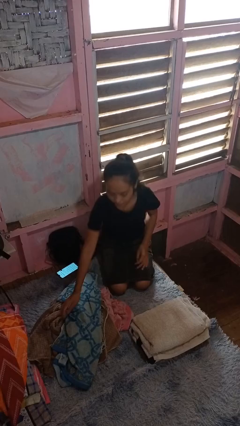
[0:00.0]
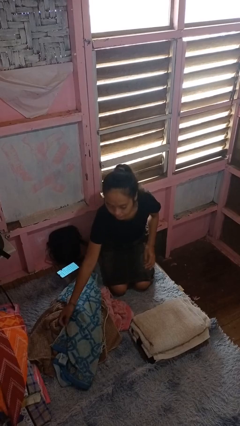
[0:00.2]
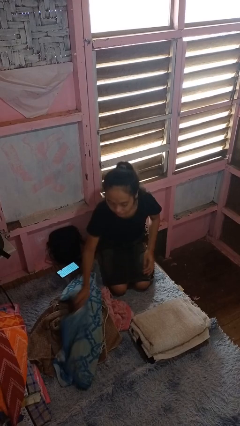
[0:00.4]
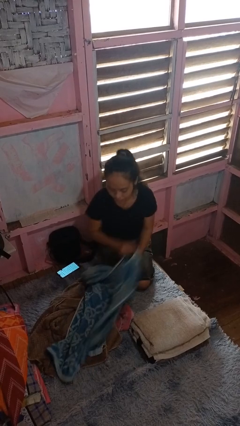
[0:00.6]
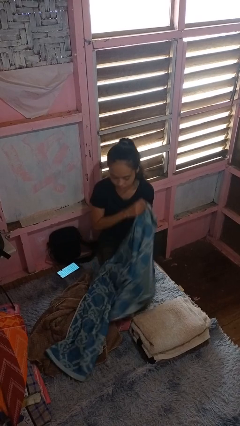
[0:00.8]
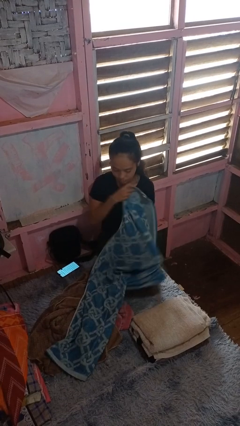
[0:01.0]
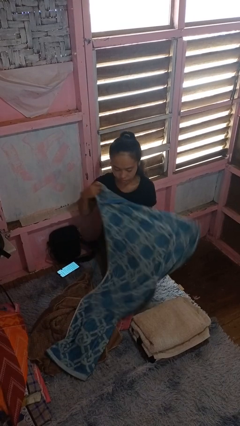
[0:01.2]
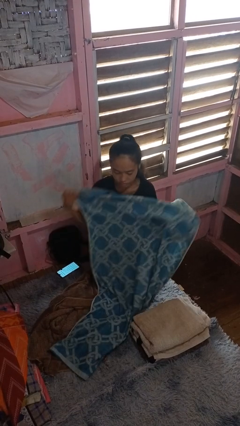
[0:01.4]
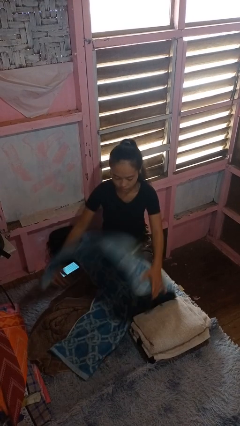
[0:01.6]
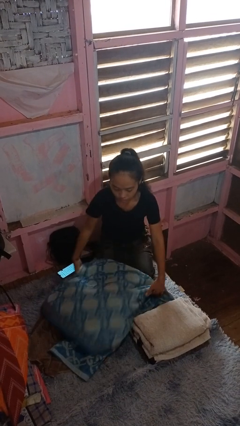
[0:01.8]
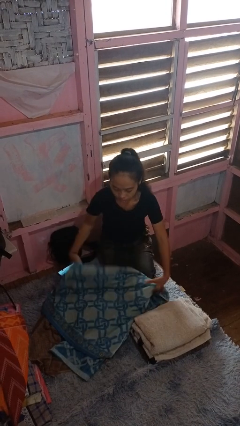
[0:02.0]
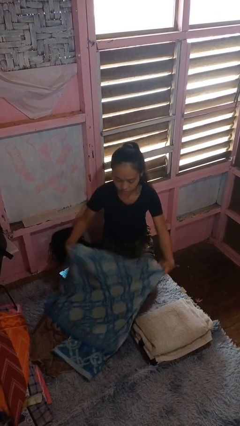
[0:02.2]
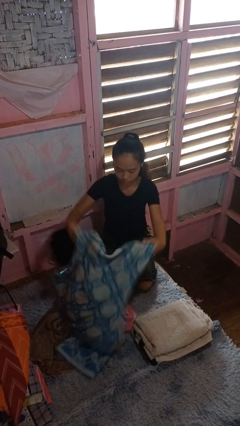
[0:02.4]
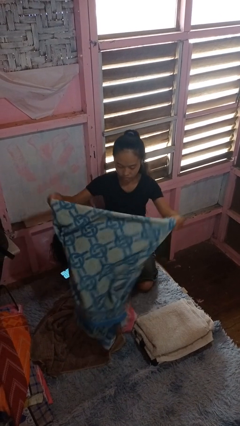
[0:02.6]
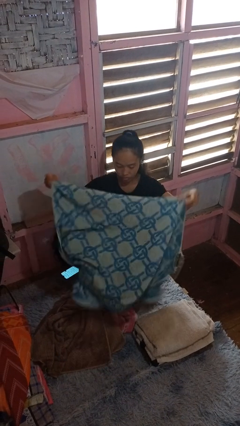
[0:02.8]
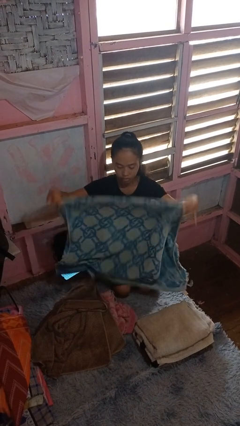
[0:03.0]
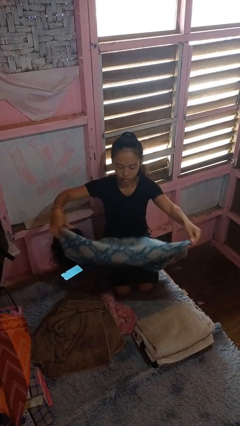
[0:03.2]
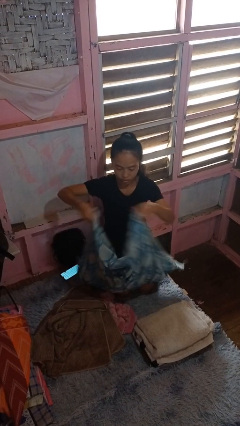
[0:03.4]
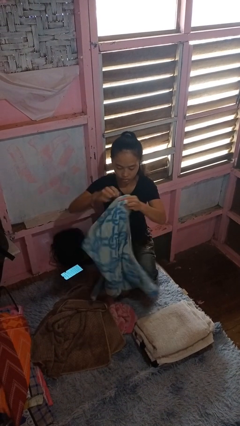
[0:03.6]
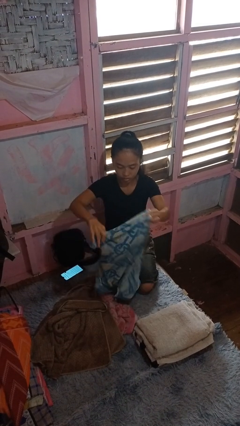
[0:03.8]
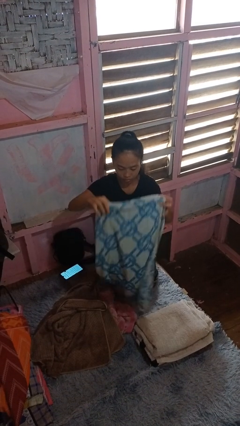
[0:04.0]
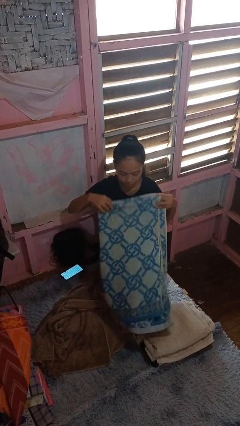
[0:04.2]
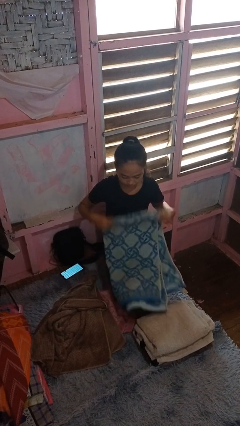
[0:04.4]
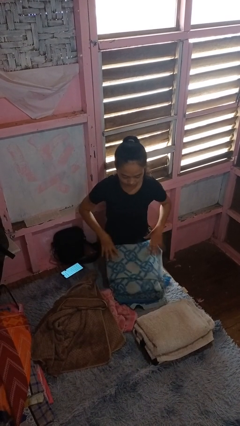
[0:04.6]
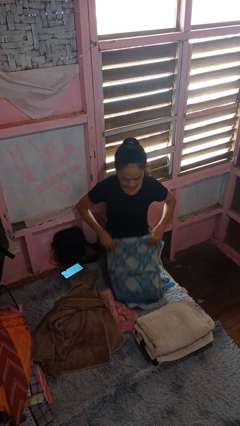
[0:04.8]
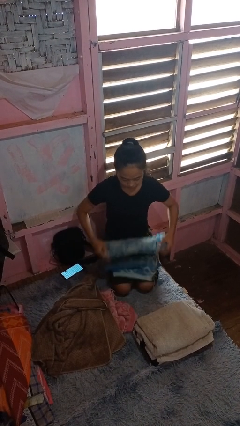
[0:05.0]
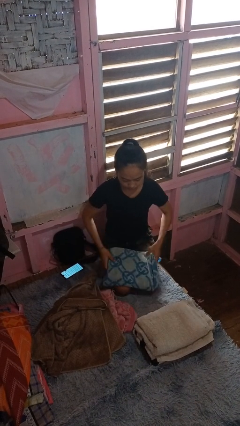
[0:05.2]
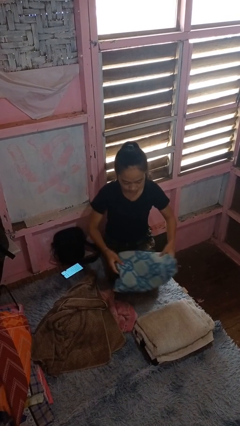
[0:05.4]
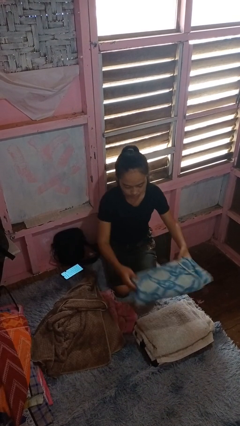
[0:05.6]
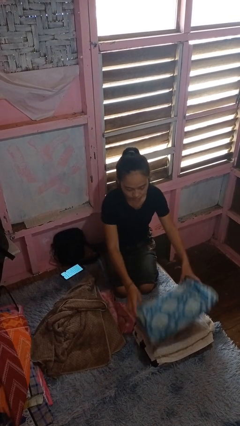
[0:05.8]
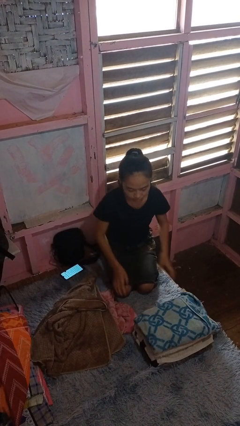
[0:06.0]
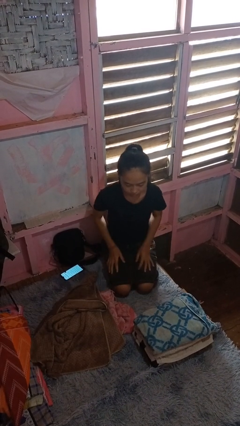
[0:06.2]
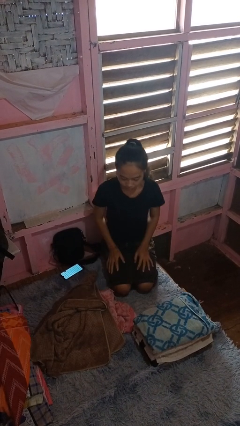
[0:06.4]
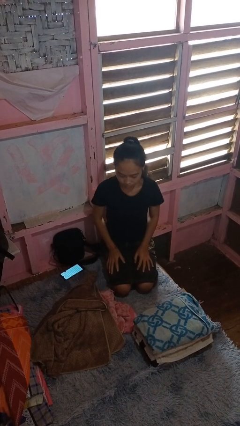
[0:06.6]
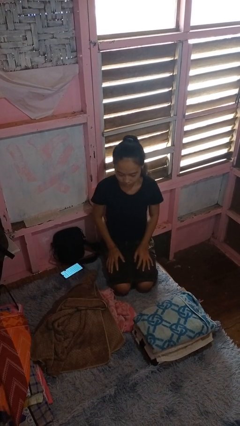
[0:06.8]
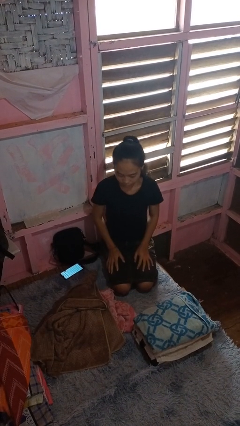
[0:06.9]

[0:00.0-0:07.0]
person folds towel

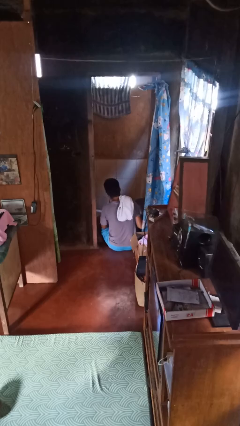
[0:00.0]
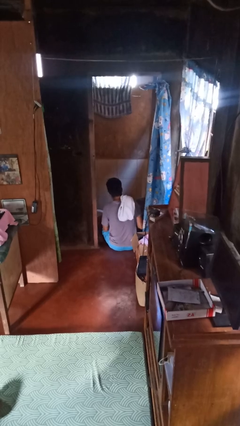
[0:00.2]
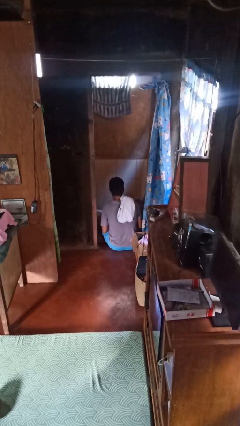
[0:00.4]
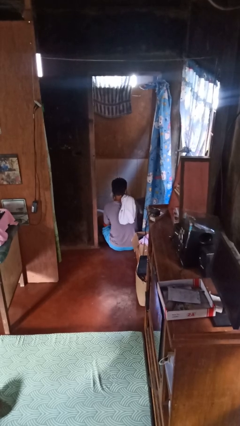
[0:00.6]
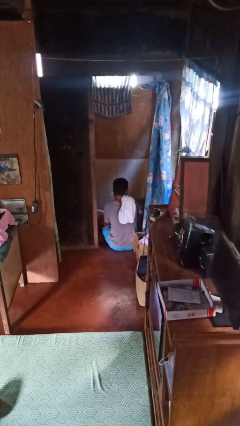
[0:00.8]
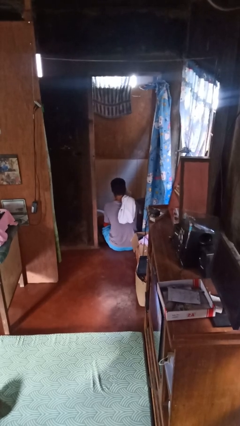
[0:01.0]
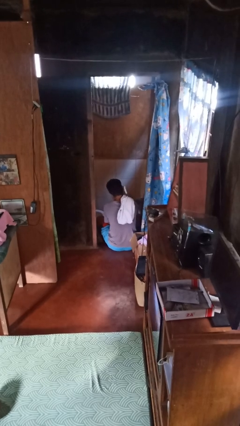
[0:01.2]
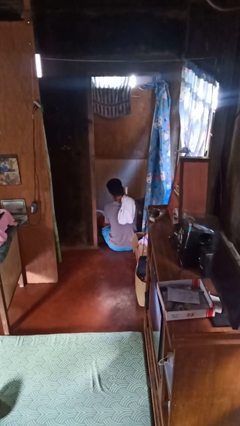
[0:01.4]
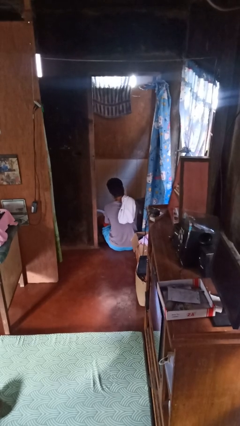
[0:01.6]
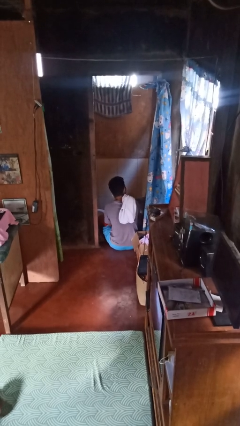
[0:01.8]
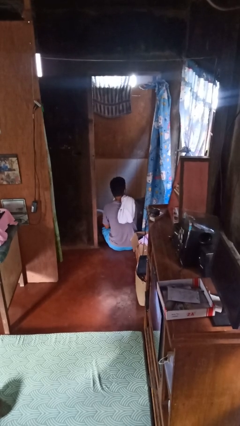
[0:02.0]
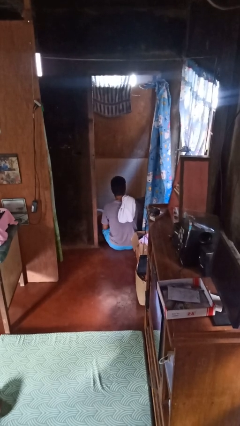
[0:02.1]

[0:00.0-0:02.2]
person dries face with towel

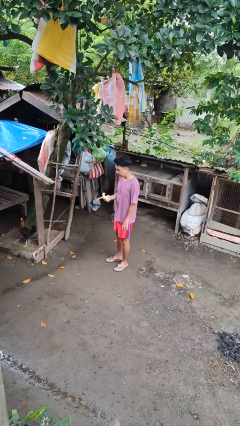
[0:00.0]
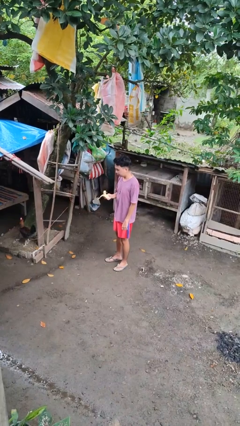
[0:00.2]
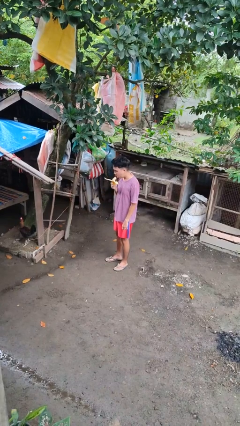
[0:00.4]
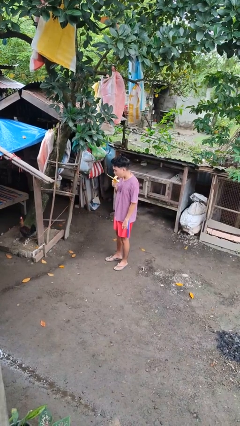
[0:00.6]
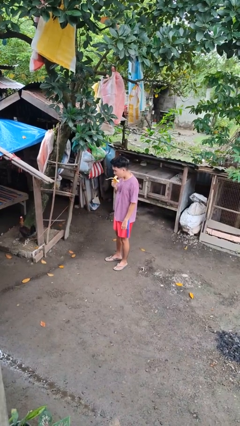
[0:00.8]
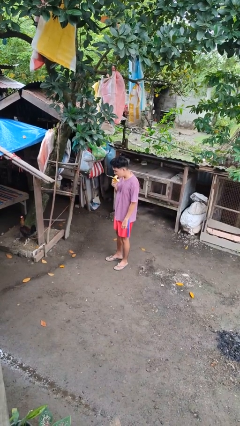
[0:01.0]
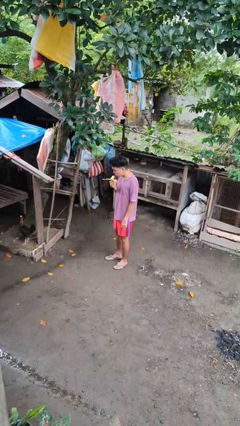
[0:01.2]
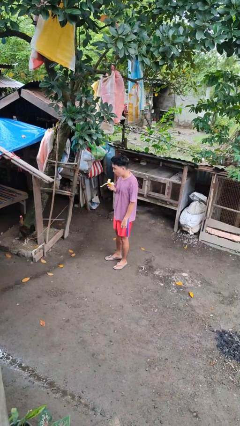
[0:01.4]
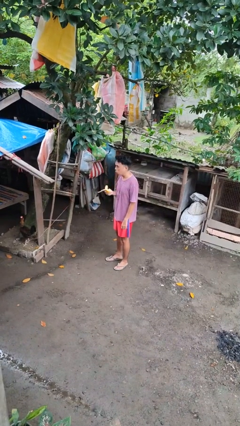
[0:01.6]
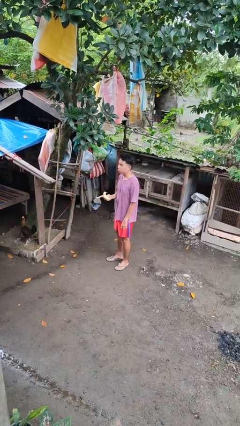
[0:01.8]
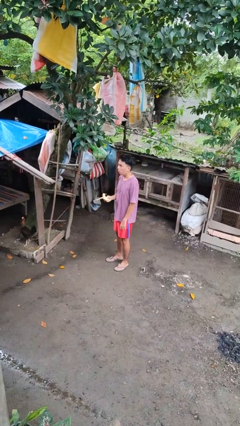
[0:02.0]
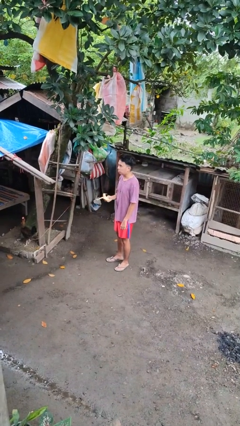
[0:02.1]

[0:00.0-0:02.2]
person eats banana

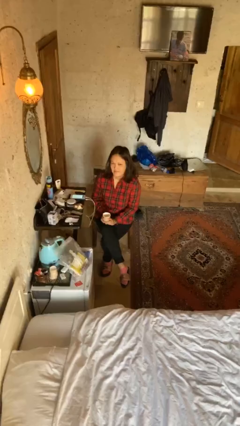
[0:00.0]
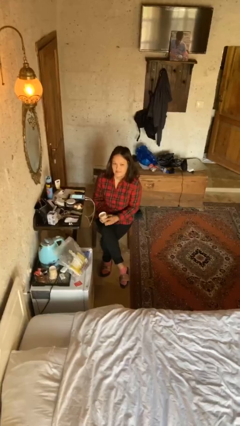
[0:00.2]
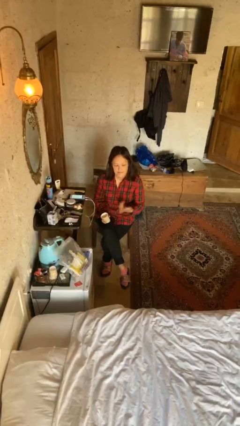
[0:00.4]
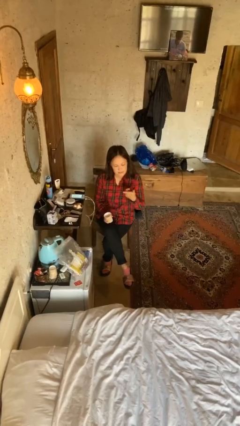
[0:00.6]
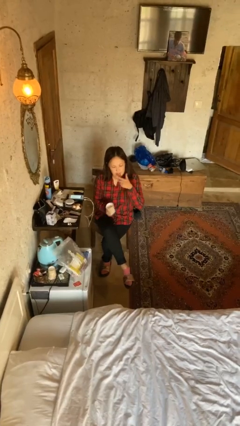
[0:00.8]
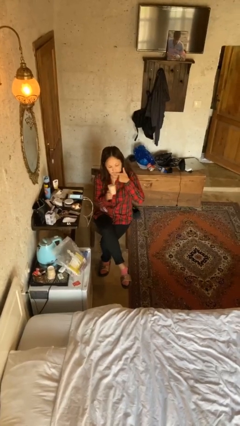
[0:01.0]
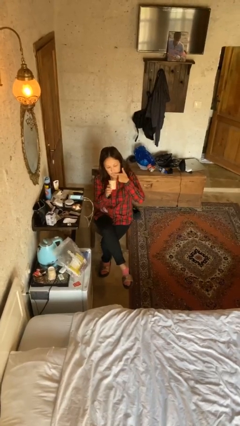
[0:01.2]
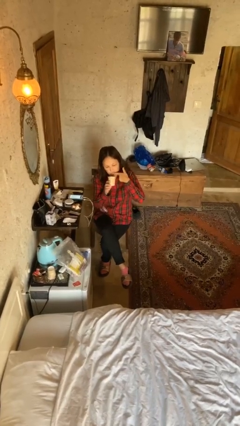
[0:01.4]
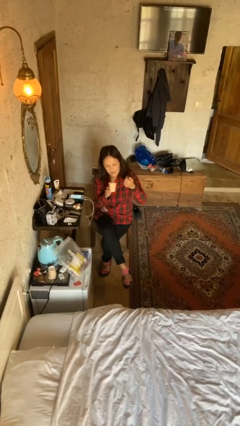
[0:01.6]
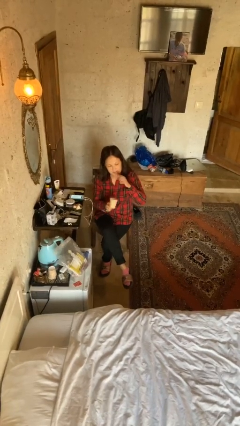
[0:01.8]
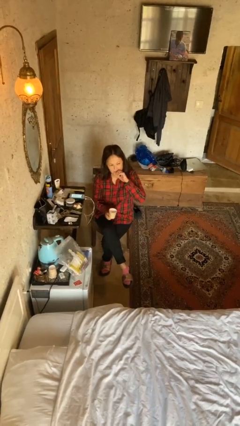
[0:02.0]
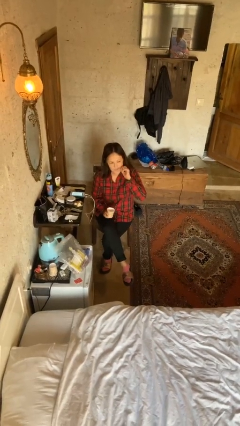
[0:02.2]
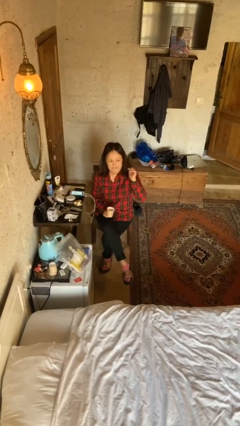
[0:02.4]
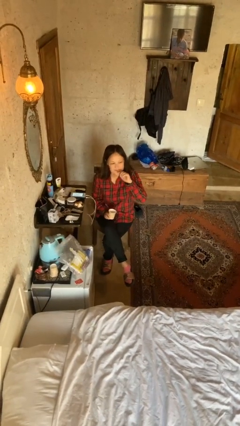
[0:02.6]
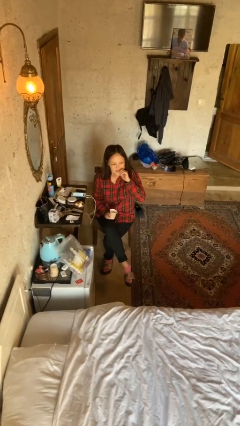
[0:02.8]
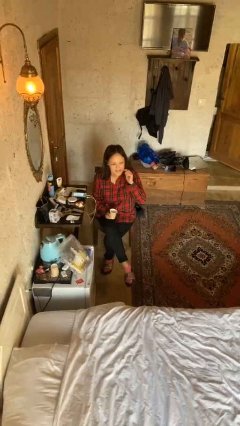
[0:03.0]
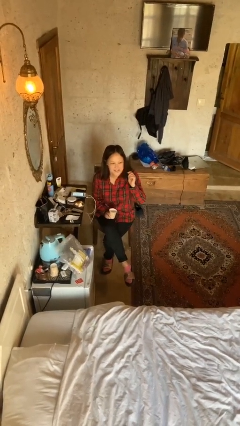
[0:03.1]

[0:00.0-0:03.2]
person licks fingers

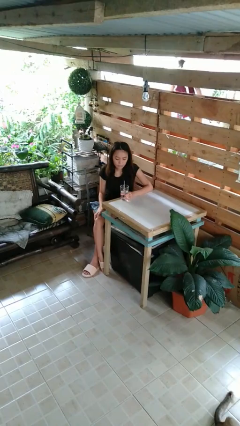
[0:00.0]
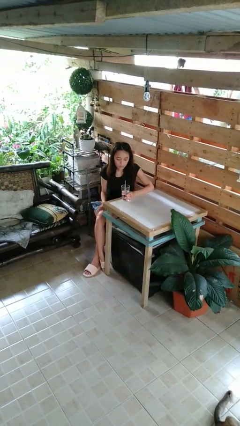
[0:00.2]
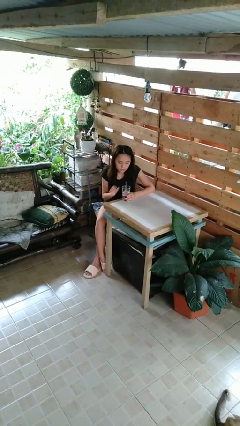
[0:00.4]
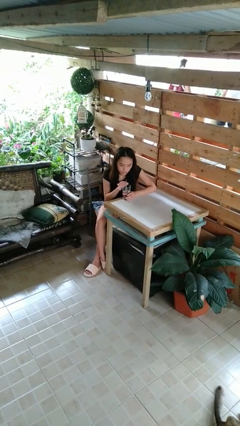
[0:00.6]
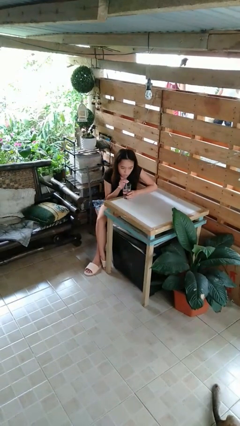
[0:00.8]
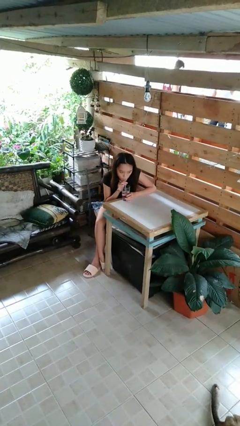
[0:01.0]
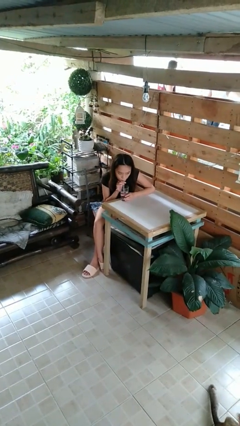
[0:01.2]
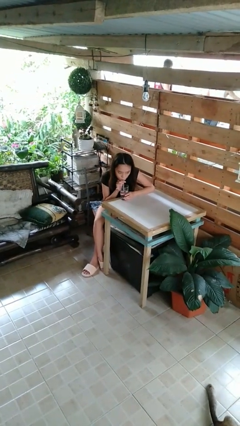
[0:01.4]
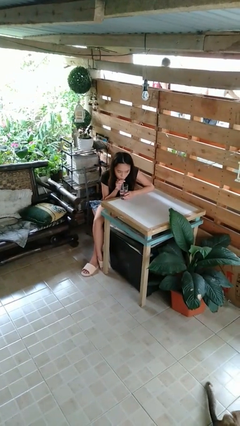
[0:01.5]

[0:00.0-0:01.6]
person drinks from straw

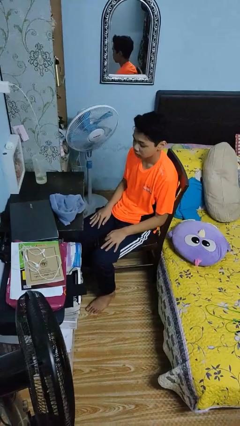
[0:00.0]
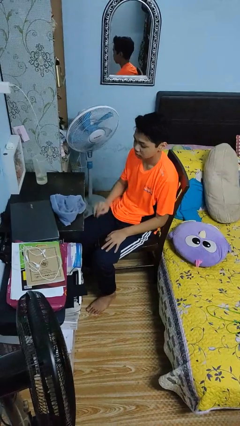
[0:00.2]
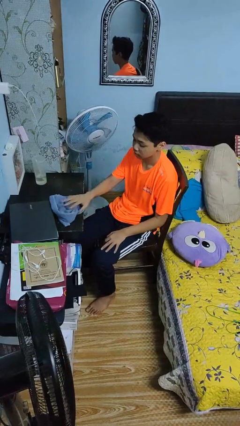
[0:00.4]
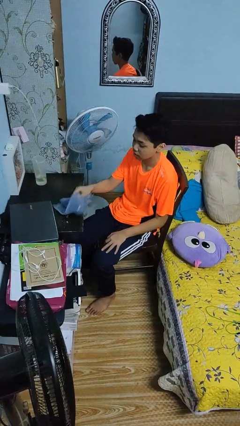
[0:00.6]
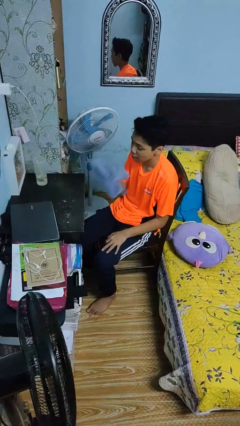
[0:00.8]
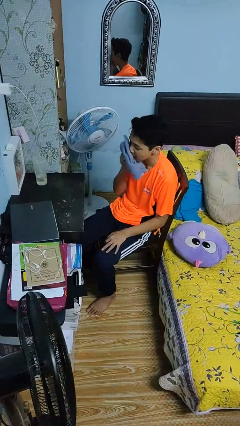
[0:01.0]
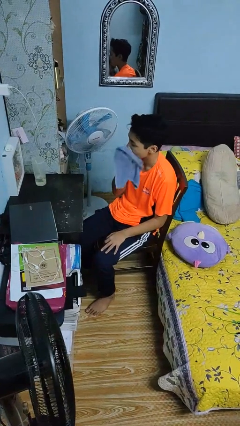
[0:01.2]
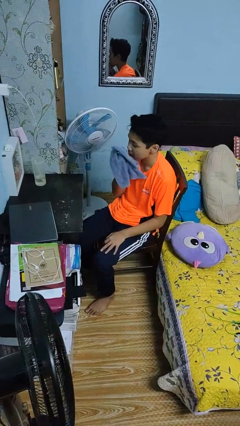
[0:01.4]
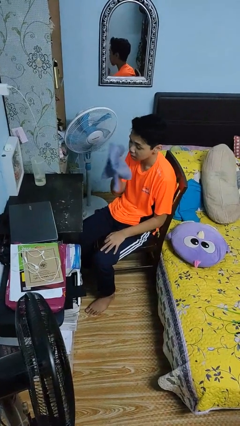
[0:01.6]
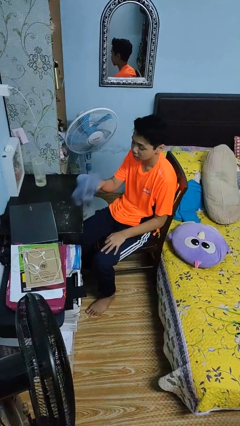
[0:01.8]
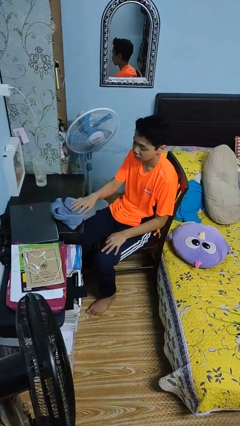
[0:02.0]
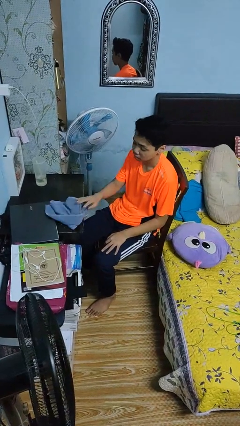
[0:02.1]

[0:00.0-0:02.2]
person wipes mouth with napkin
